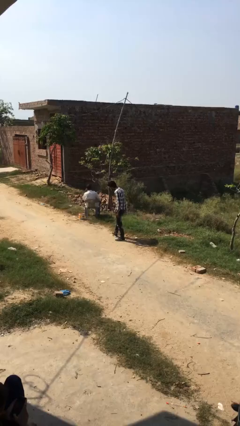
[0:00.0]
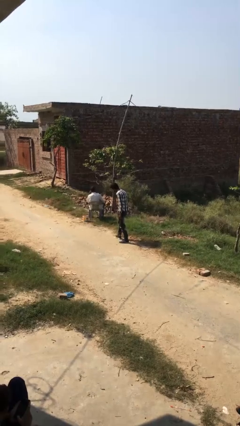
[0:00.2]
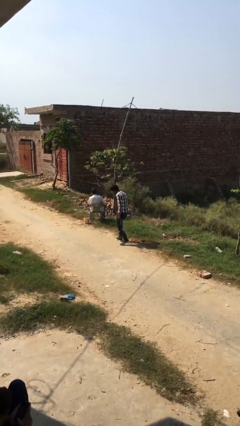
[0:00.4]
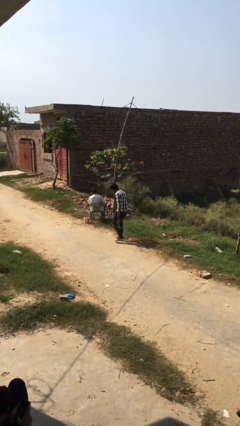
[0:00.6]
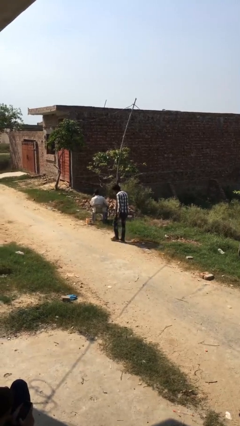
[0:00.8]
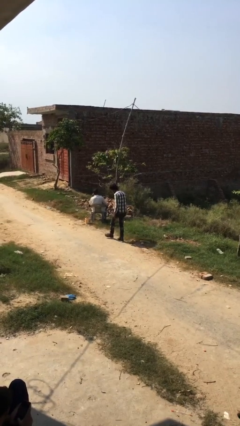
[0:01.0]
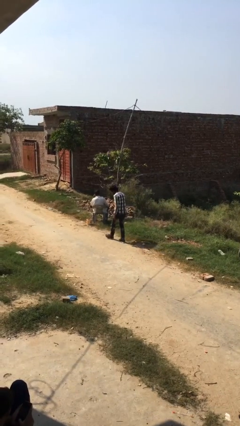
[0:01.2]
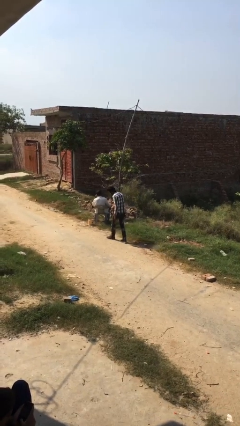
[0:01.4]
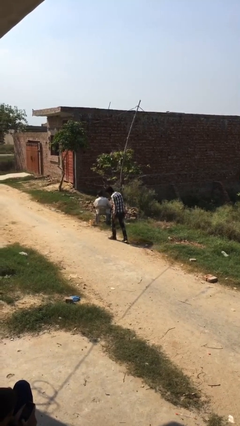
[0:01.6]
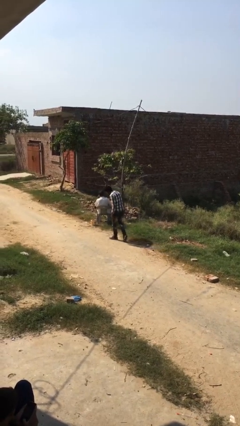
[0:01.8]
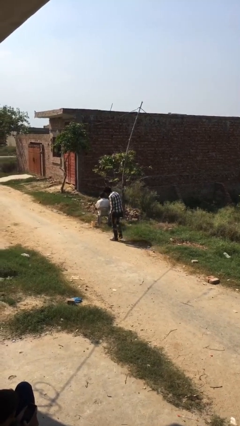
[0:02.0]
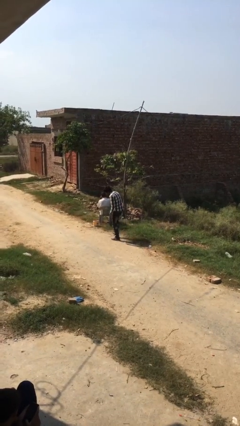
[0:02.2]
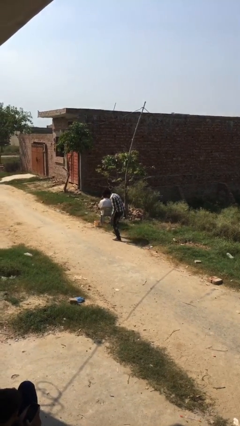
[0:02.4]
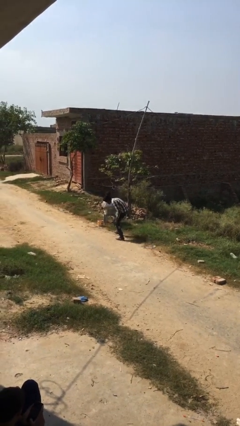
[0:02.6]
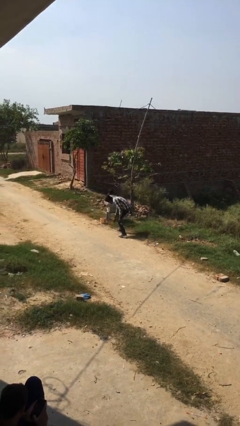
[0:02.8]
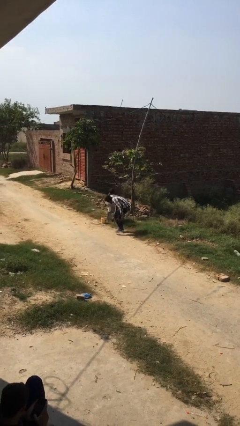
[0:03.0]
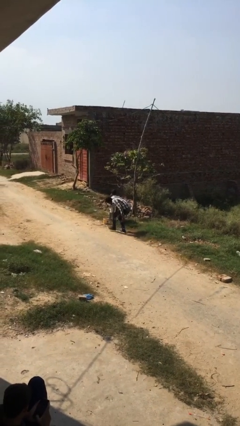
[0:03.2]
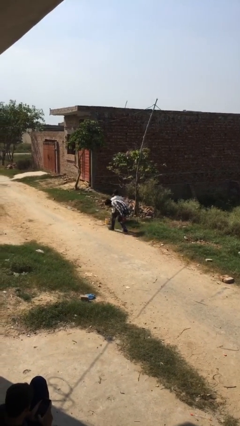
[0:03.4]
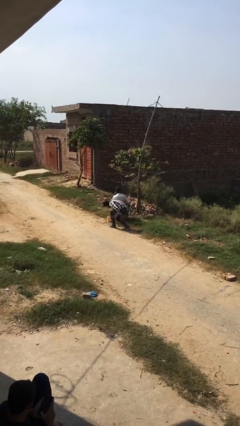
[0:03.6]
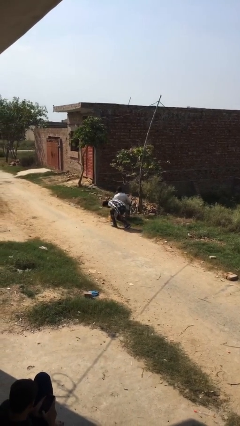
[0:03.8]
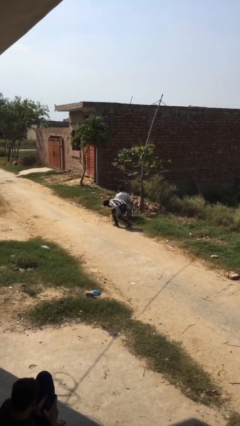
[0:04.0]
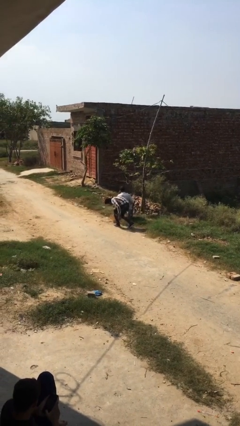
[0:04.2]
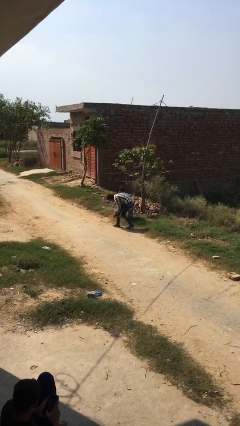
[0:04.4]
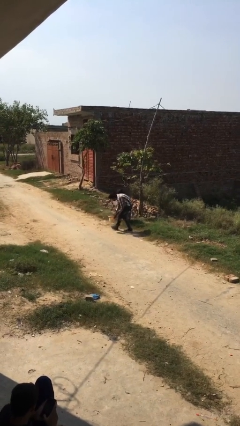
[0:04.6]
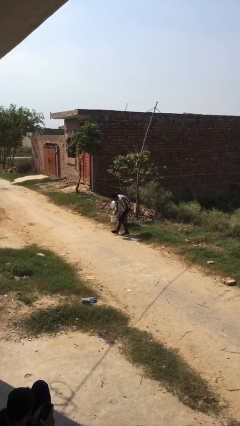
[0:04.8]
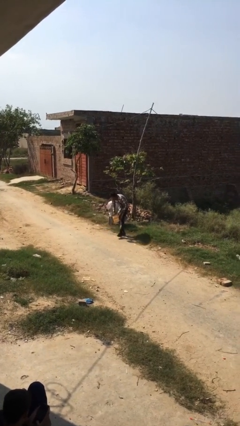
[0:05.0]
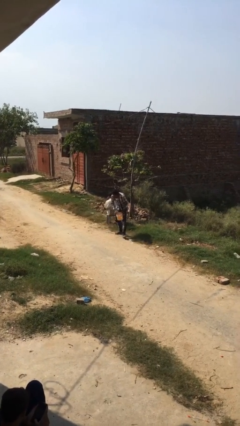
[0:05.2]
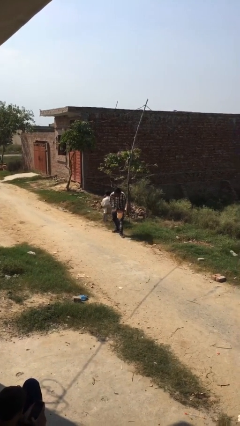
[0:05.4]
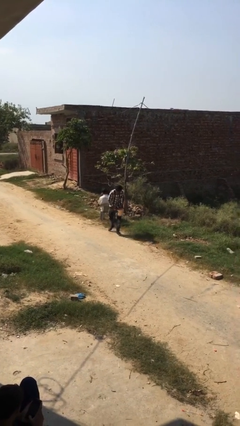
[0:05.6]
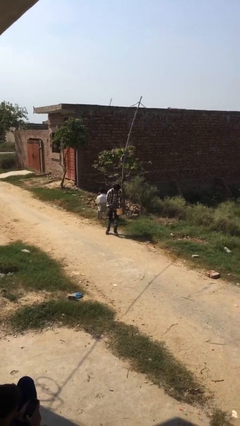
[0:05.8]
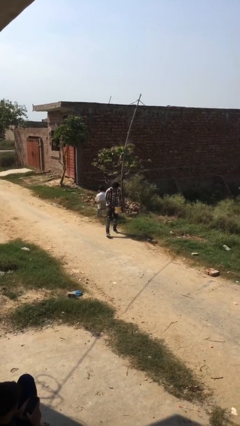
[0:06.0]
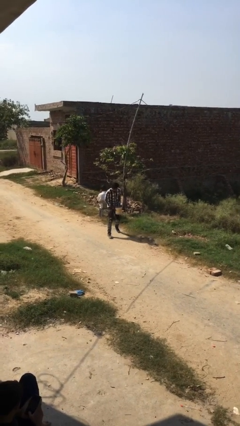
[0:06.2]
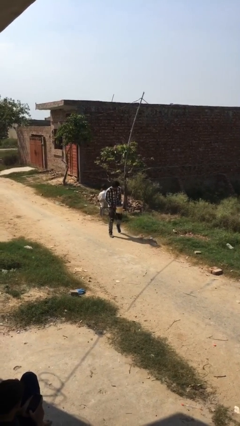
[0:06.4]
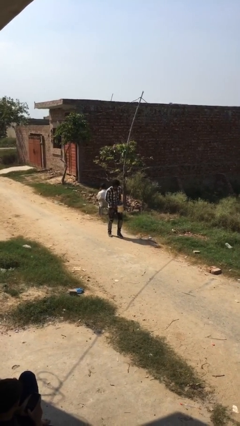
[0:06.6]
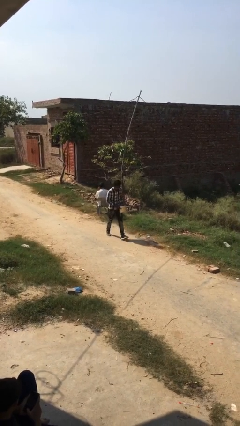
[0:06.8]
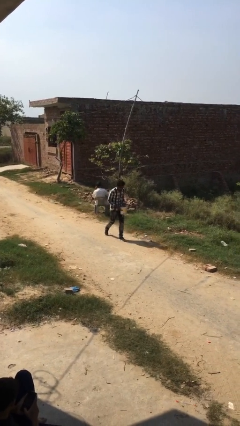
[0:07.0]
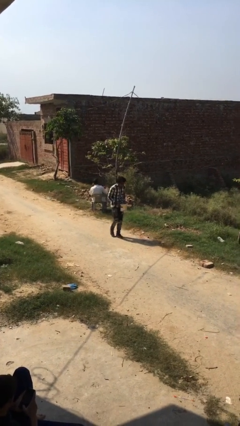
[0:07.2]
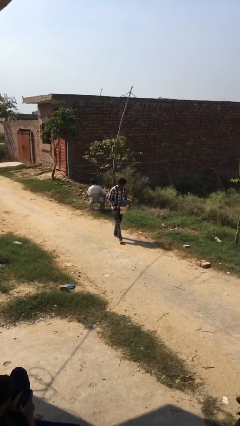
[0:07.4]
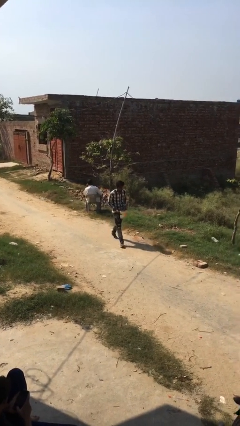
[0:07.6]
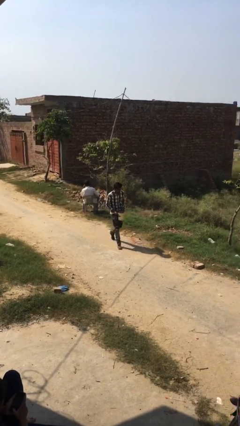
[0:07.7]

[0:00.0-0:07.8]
person steals object from person

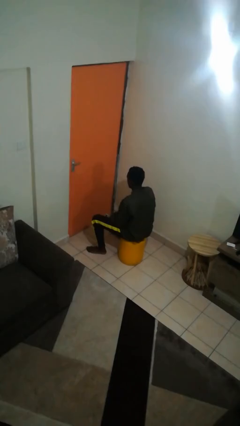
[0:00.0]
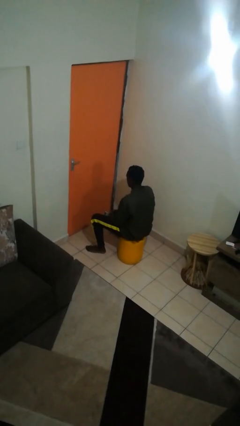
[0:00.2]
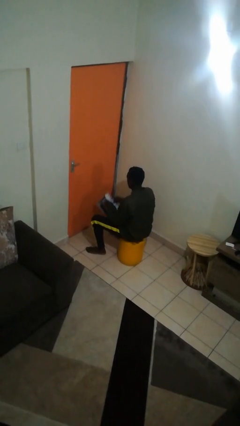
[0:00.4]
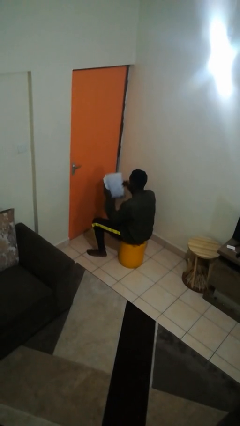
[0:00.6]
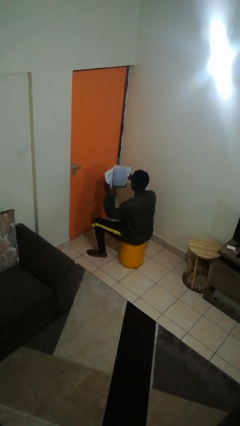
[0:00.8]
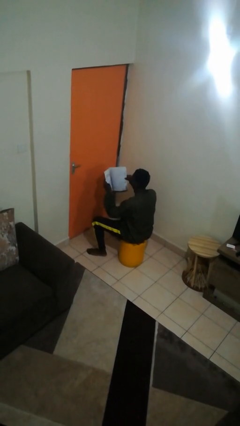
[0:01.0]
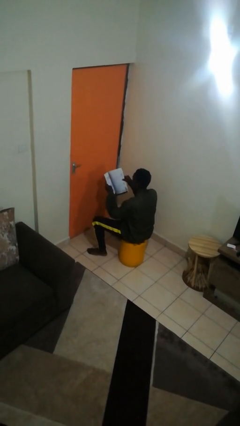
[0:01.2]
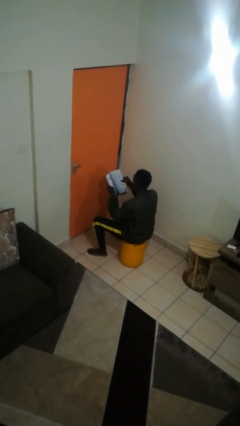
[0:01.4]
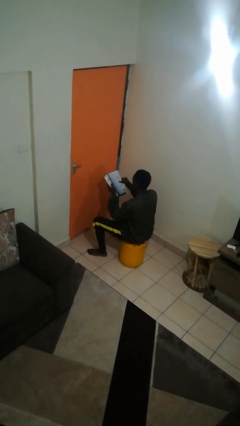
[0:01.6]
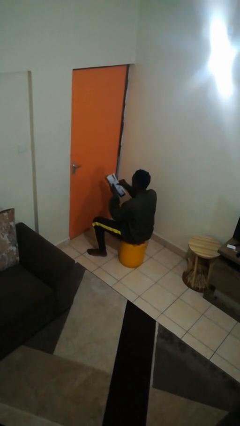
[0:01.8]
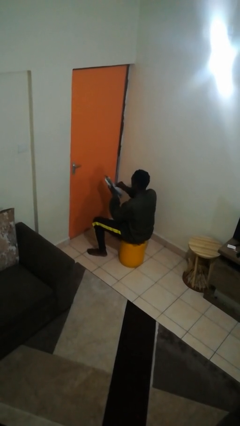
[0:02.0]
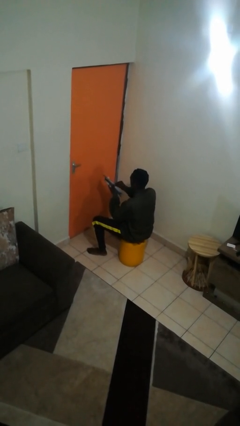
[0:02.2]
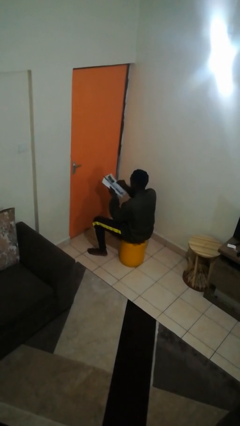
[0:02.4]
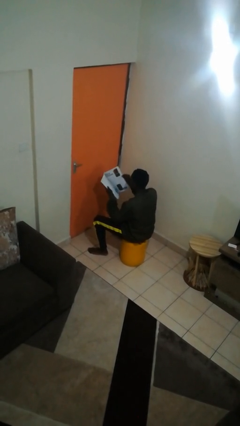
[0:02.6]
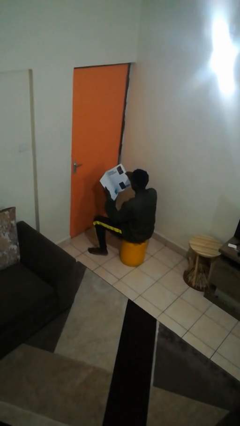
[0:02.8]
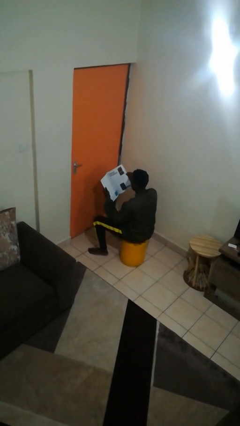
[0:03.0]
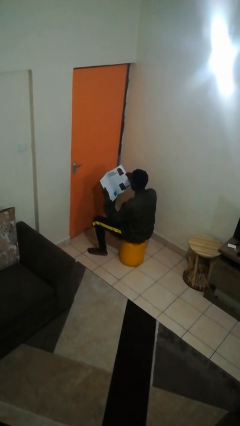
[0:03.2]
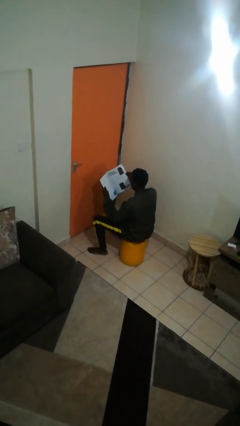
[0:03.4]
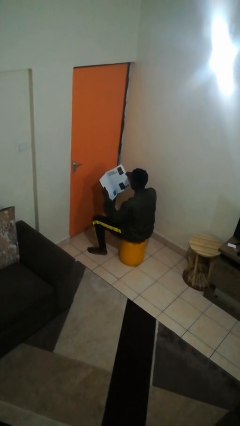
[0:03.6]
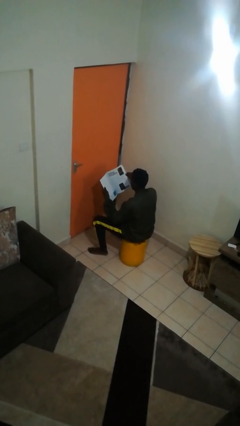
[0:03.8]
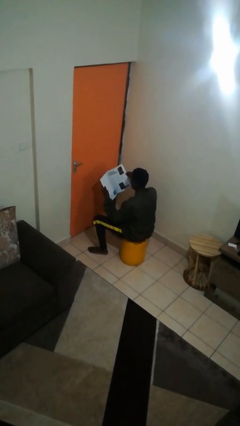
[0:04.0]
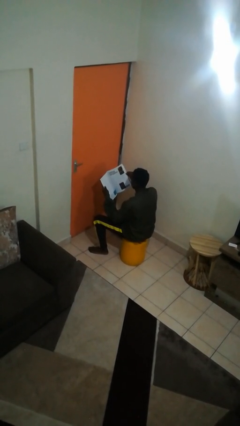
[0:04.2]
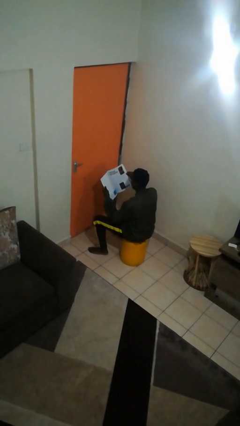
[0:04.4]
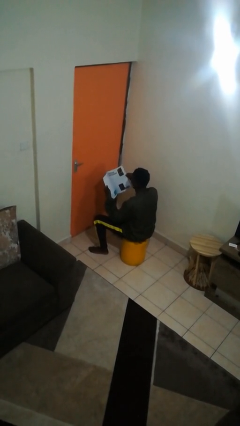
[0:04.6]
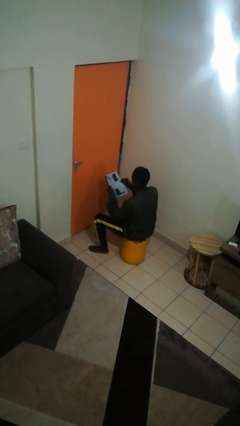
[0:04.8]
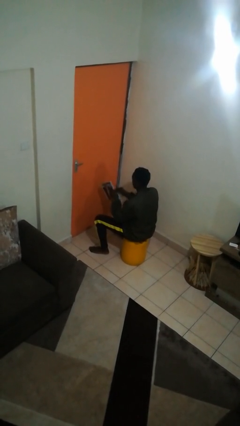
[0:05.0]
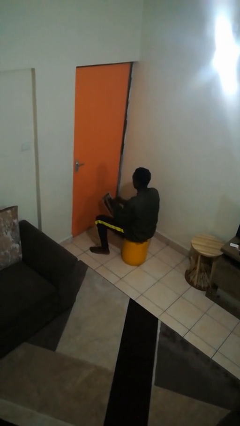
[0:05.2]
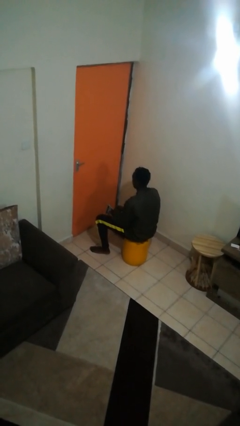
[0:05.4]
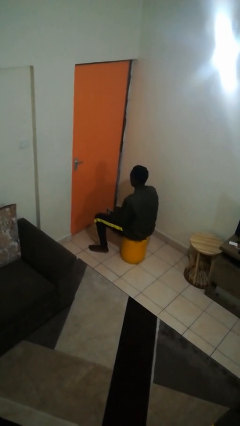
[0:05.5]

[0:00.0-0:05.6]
person reads magazine

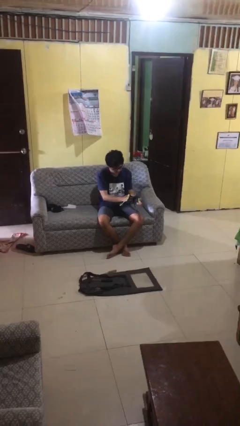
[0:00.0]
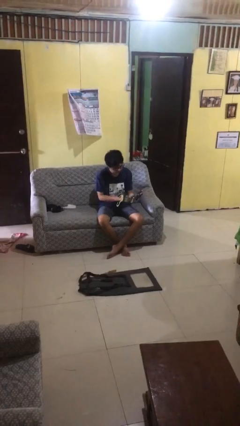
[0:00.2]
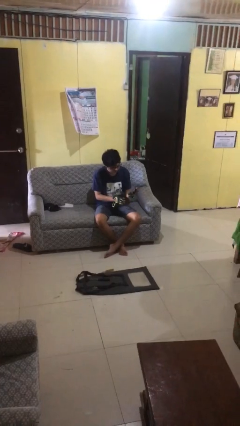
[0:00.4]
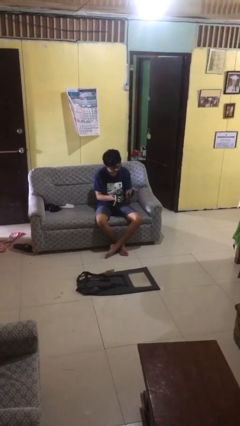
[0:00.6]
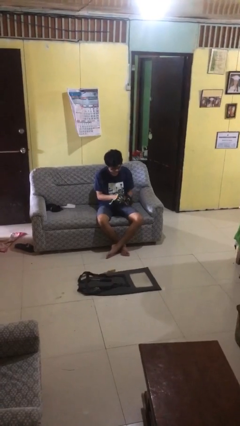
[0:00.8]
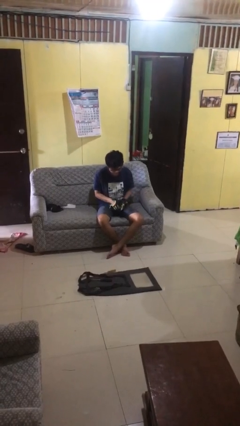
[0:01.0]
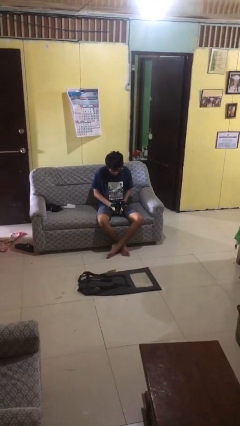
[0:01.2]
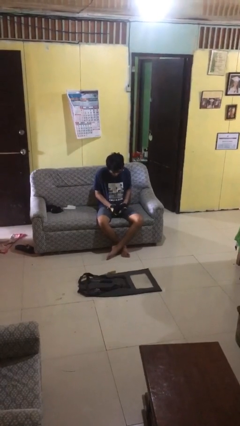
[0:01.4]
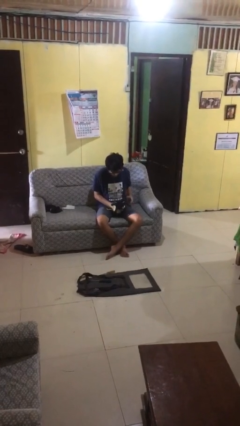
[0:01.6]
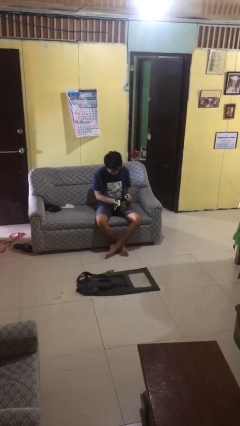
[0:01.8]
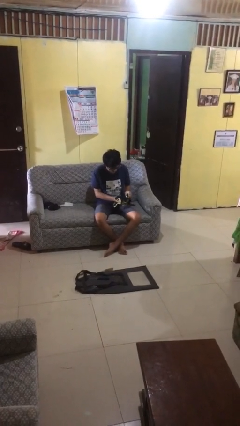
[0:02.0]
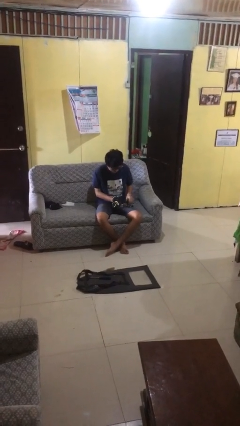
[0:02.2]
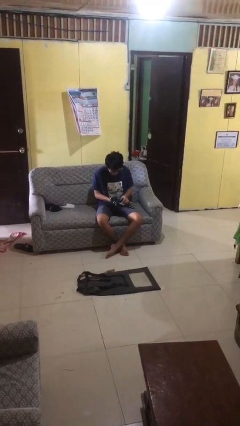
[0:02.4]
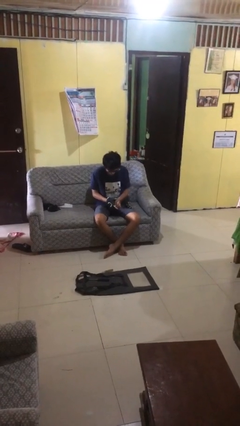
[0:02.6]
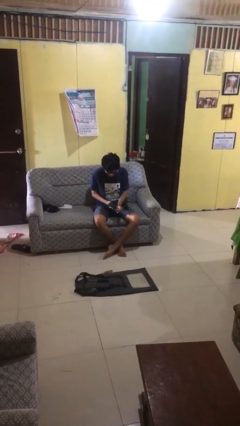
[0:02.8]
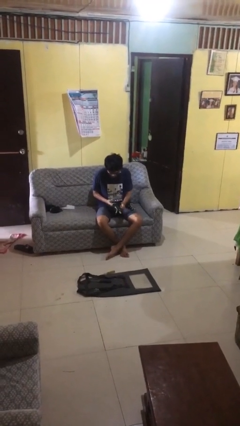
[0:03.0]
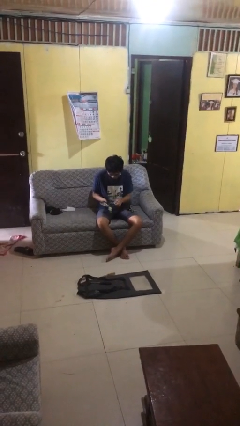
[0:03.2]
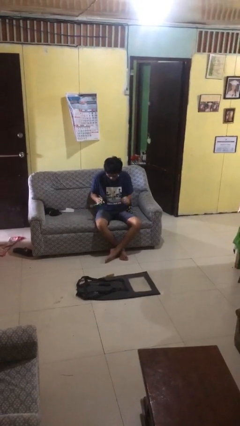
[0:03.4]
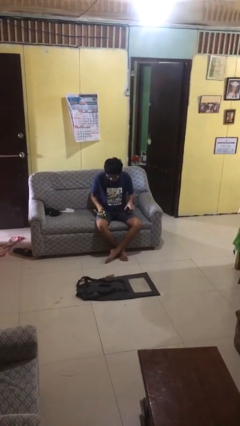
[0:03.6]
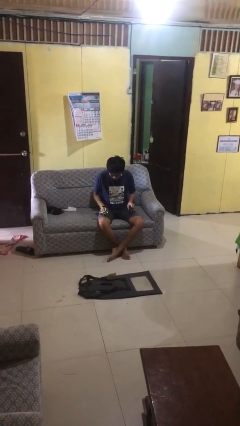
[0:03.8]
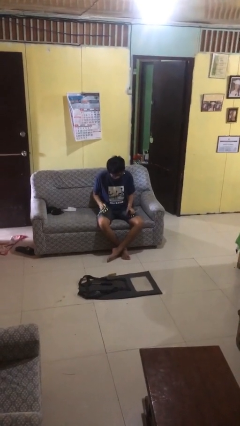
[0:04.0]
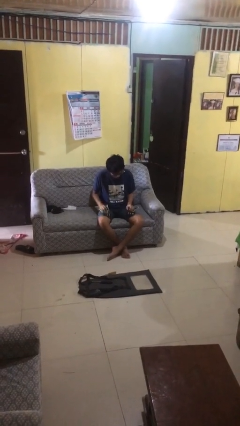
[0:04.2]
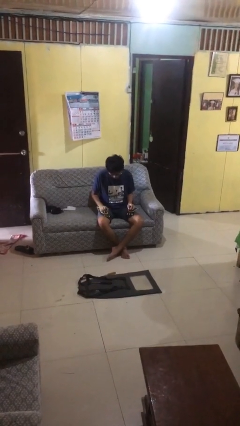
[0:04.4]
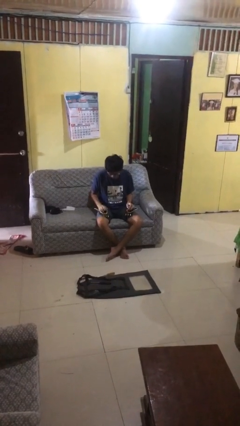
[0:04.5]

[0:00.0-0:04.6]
person takes off gloves

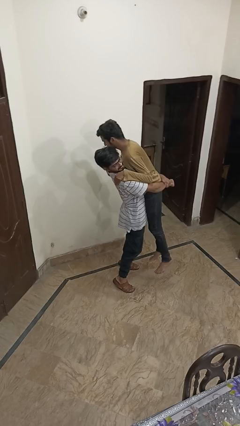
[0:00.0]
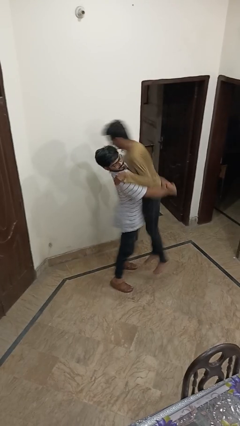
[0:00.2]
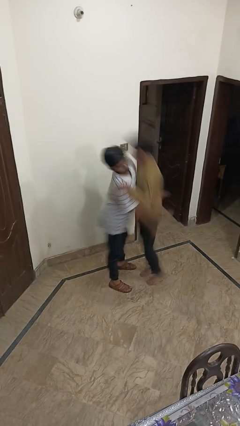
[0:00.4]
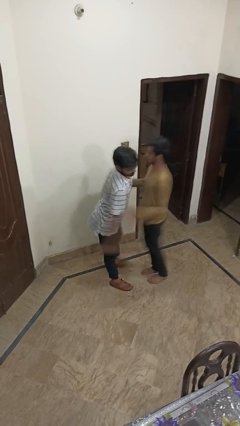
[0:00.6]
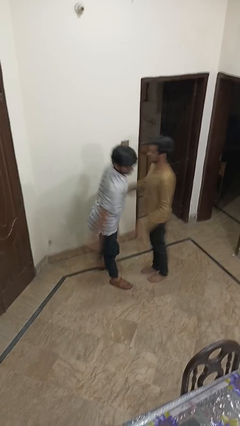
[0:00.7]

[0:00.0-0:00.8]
person puts down person
